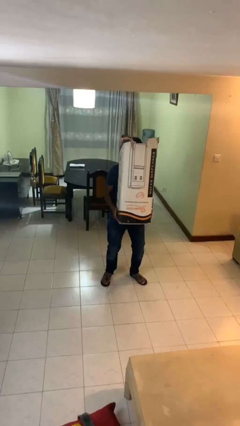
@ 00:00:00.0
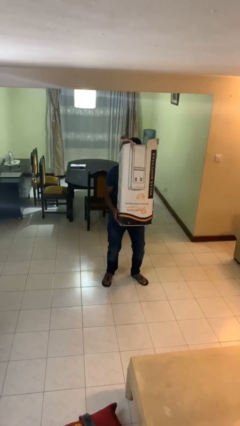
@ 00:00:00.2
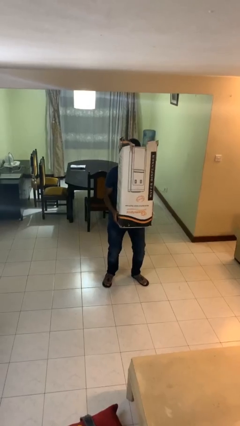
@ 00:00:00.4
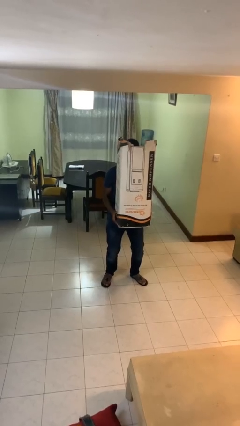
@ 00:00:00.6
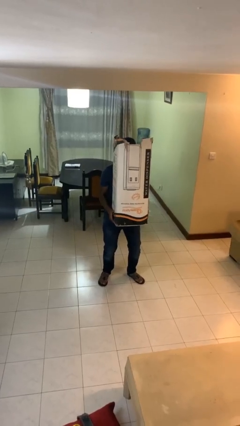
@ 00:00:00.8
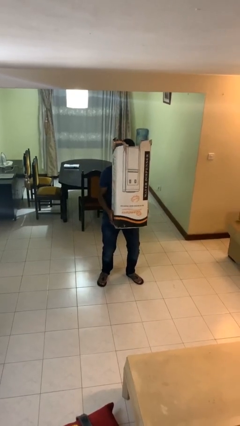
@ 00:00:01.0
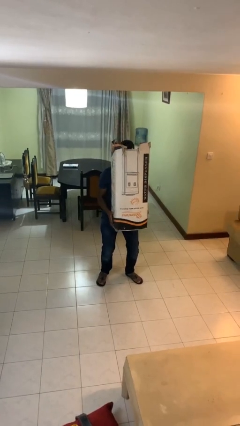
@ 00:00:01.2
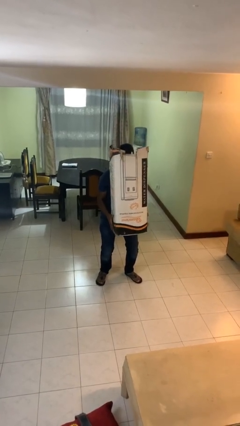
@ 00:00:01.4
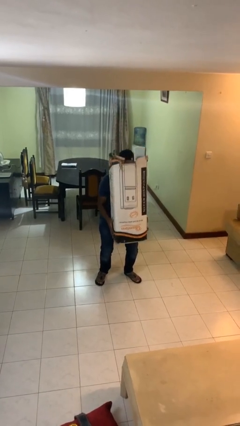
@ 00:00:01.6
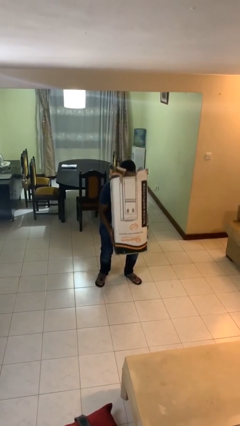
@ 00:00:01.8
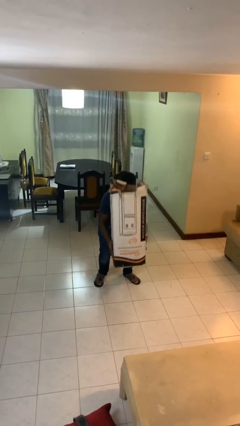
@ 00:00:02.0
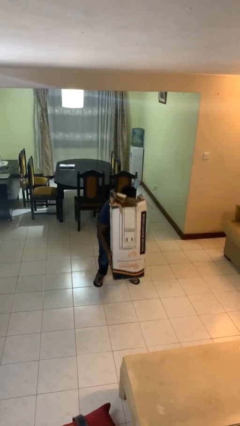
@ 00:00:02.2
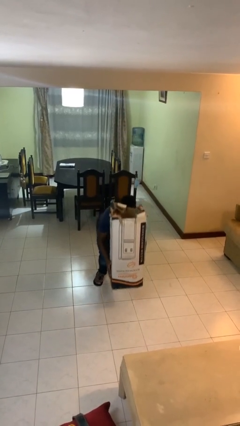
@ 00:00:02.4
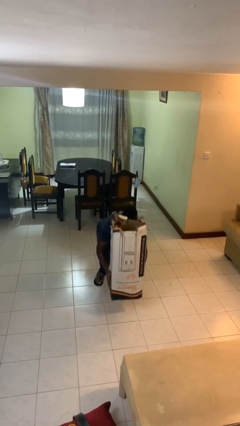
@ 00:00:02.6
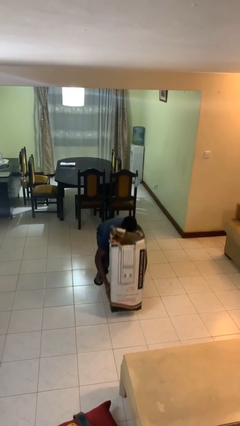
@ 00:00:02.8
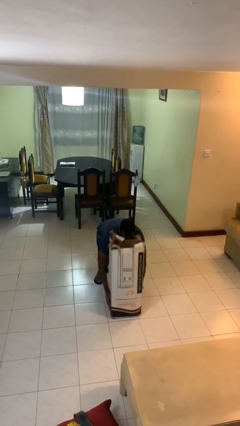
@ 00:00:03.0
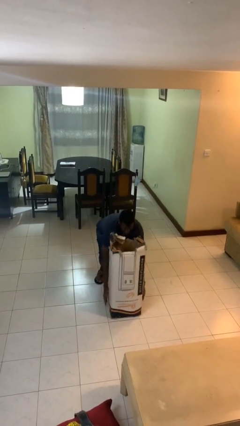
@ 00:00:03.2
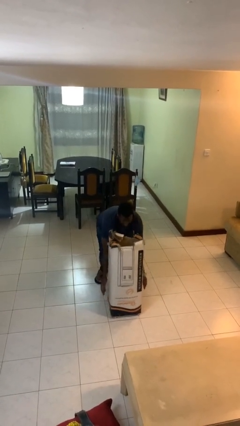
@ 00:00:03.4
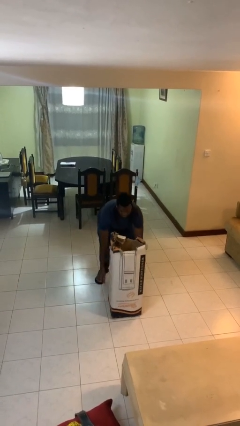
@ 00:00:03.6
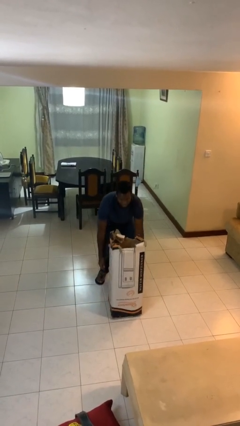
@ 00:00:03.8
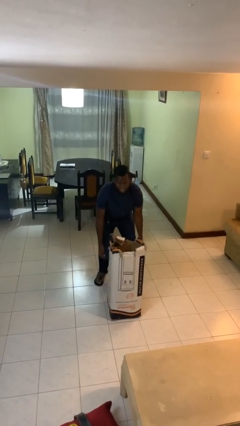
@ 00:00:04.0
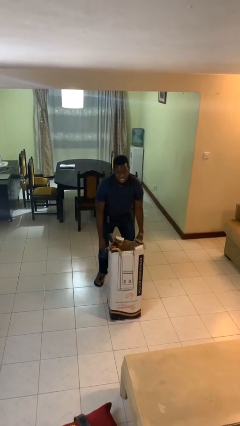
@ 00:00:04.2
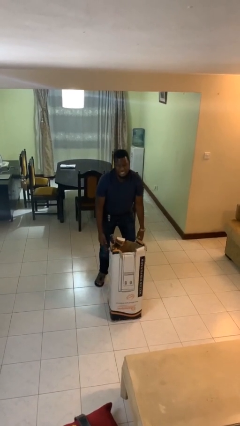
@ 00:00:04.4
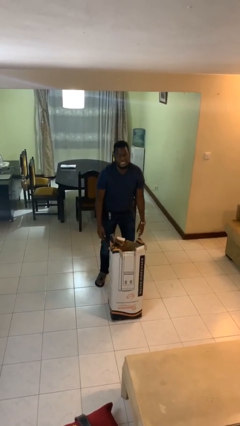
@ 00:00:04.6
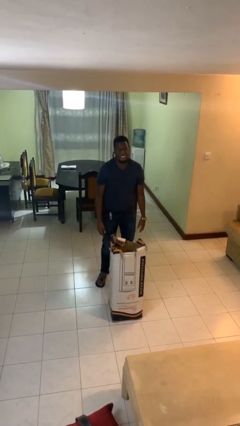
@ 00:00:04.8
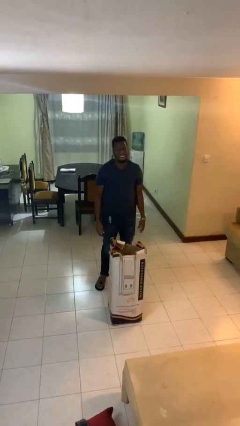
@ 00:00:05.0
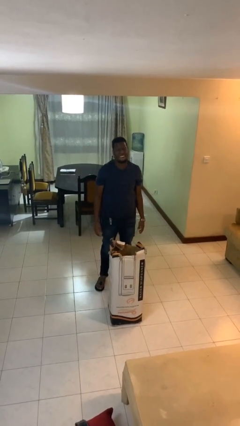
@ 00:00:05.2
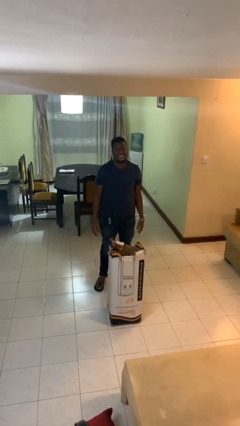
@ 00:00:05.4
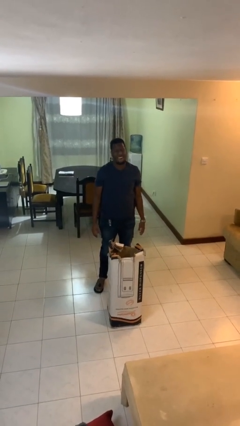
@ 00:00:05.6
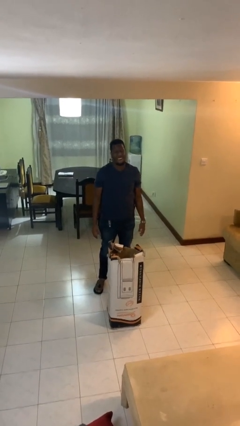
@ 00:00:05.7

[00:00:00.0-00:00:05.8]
person puts down object on floor

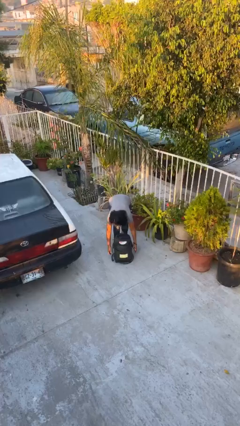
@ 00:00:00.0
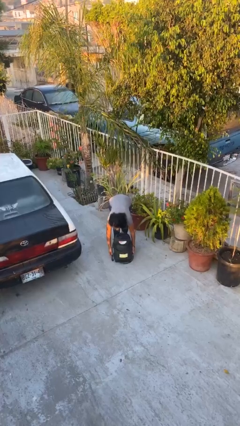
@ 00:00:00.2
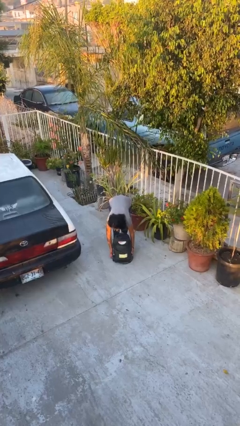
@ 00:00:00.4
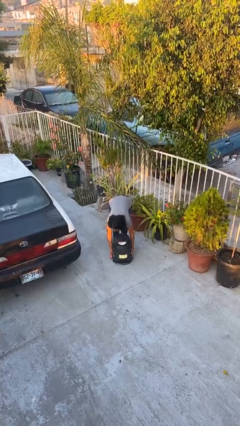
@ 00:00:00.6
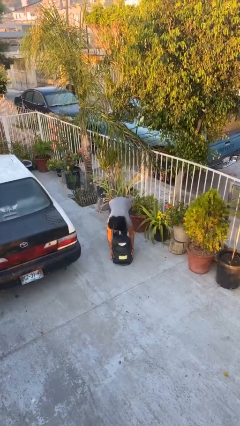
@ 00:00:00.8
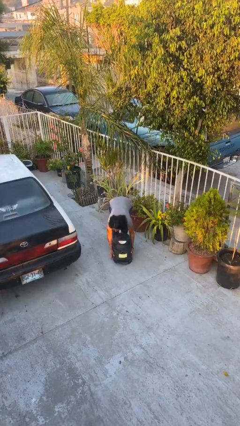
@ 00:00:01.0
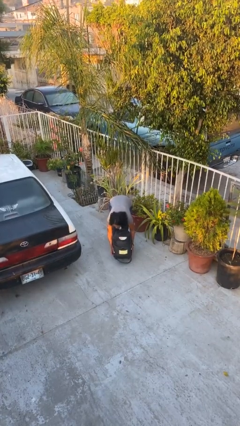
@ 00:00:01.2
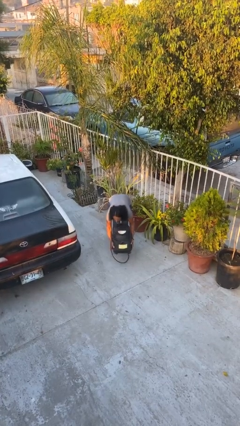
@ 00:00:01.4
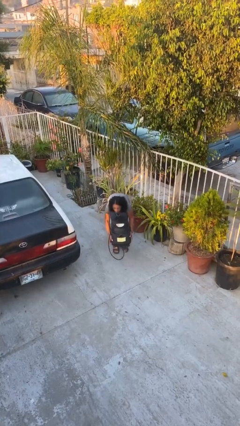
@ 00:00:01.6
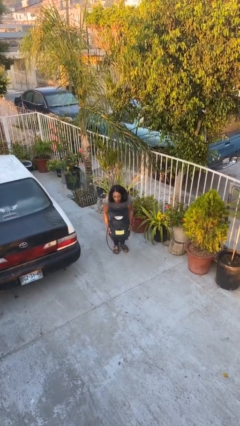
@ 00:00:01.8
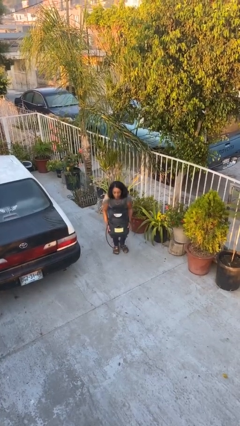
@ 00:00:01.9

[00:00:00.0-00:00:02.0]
person picks up object from floor

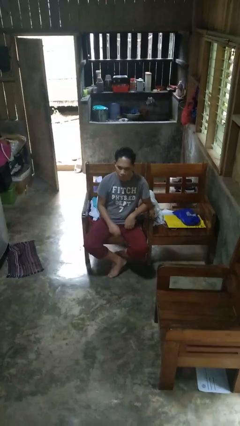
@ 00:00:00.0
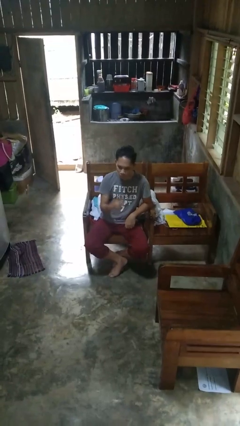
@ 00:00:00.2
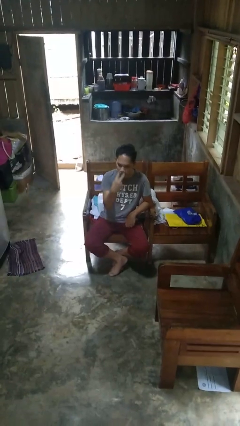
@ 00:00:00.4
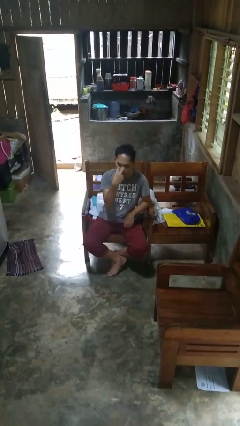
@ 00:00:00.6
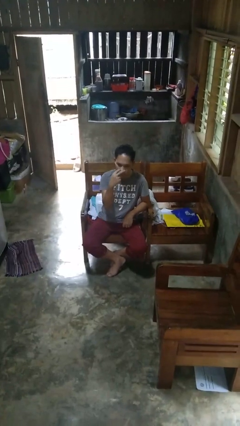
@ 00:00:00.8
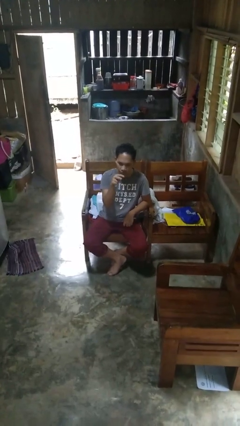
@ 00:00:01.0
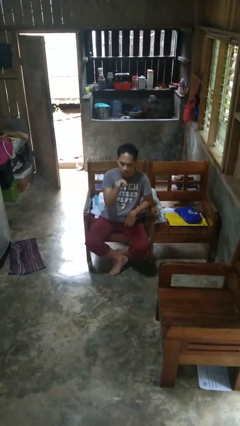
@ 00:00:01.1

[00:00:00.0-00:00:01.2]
person gestures watch closely

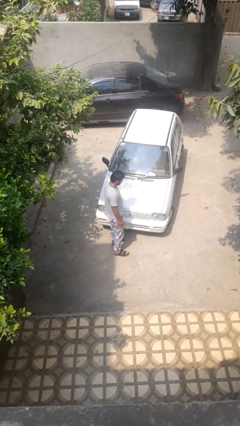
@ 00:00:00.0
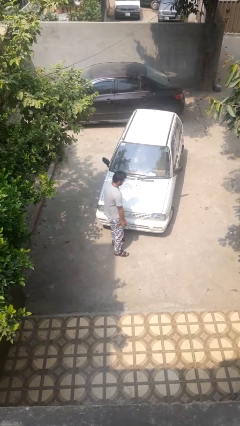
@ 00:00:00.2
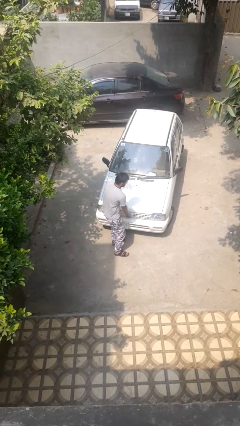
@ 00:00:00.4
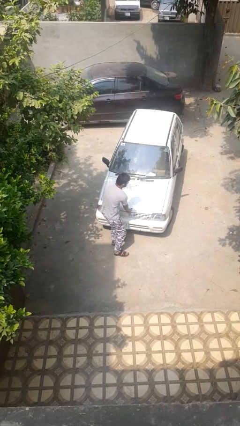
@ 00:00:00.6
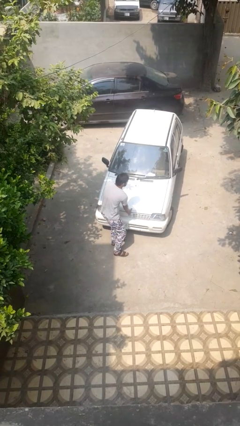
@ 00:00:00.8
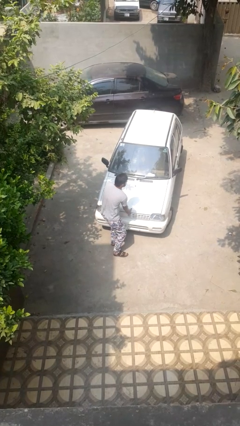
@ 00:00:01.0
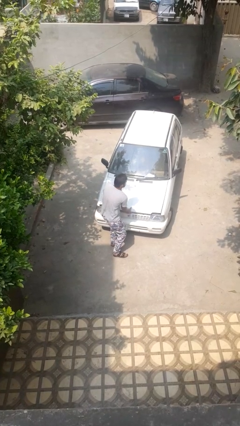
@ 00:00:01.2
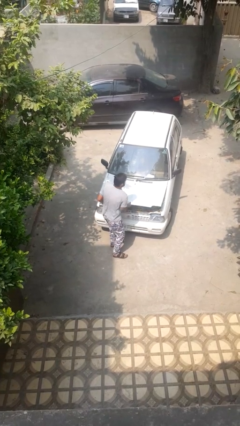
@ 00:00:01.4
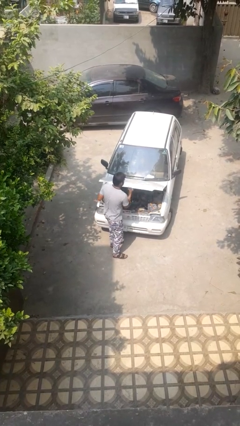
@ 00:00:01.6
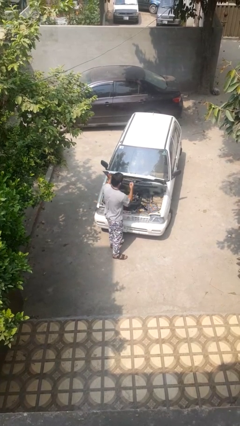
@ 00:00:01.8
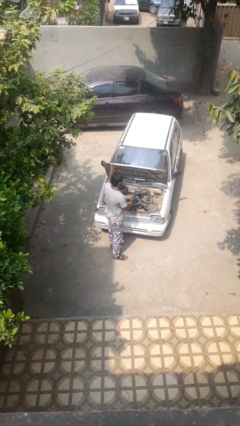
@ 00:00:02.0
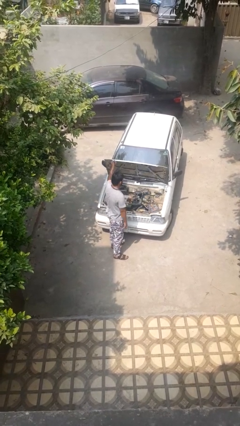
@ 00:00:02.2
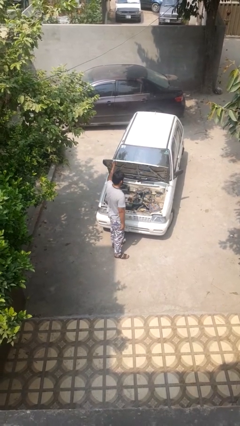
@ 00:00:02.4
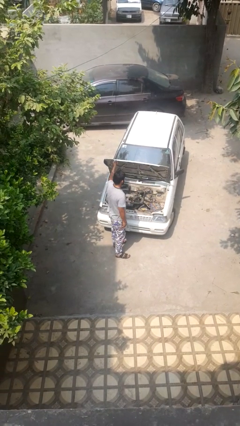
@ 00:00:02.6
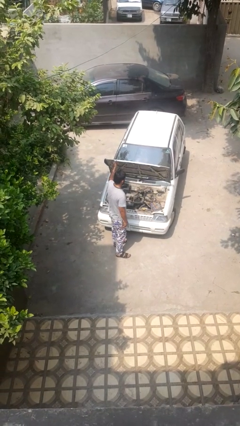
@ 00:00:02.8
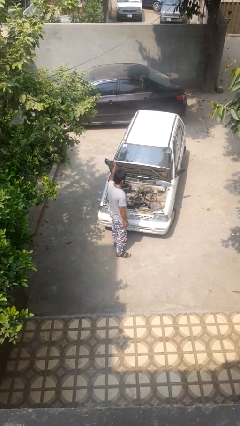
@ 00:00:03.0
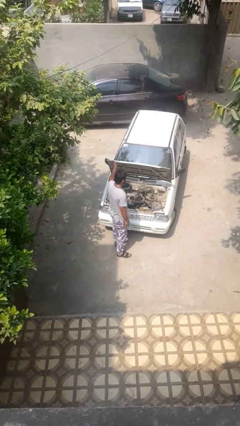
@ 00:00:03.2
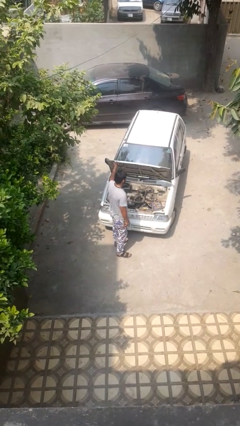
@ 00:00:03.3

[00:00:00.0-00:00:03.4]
person opens car hood

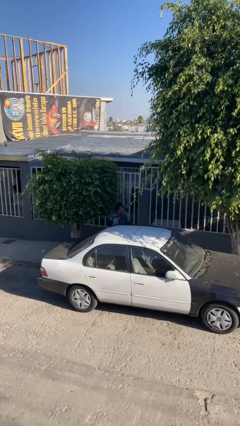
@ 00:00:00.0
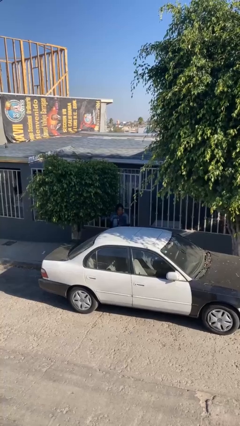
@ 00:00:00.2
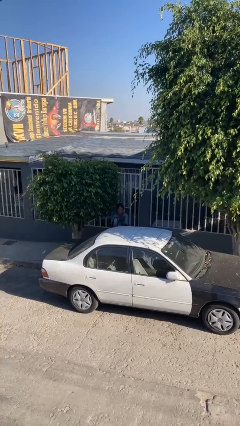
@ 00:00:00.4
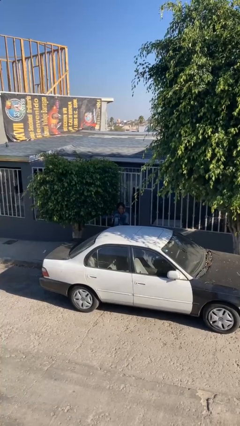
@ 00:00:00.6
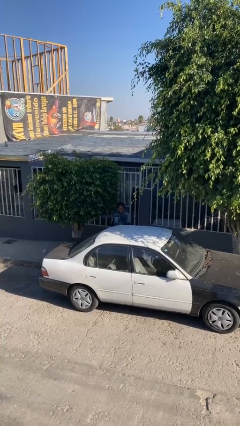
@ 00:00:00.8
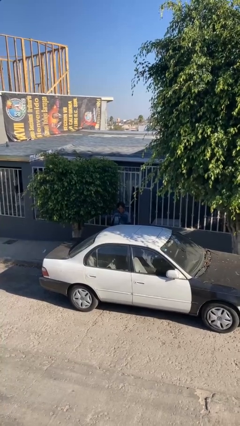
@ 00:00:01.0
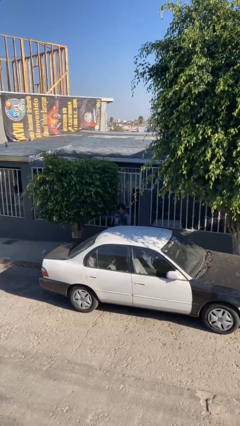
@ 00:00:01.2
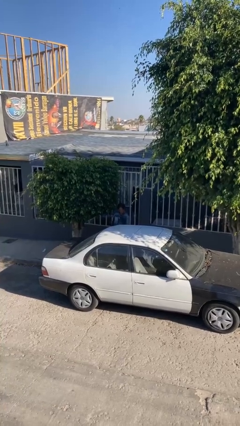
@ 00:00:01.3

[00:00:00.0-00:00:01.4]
person closes car door

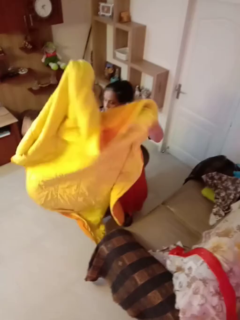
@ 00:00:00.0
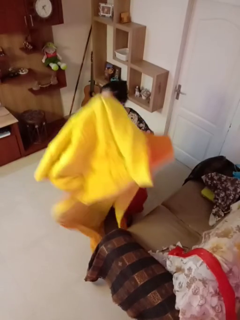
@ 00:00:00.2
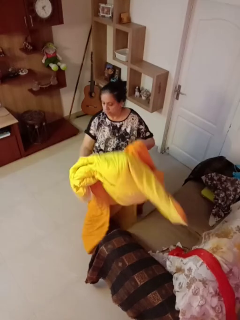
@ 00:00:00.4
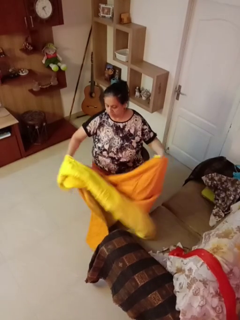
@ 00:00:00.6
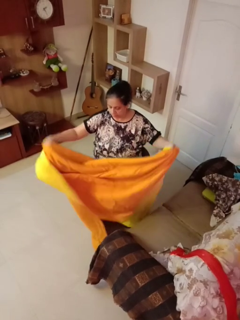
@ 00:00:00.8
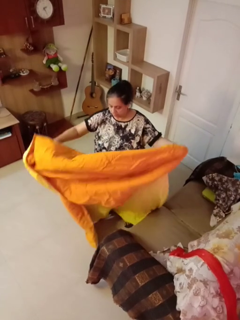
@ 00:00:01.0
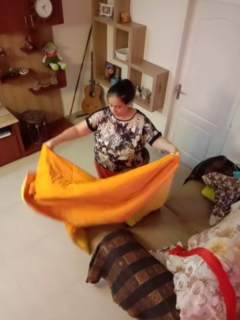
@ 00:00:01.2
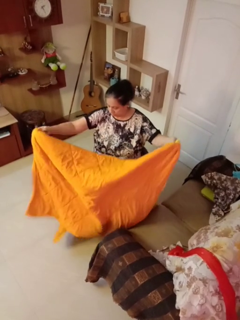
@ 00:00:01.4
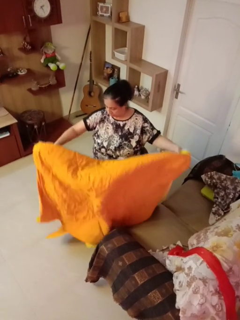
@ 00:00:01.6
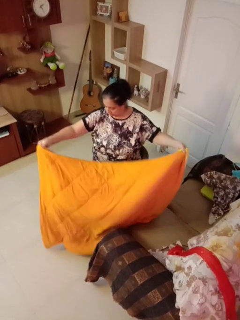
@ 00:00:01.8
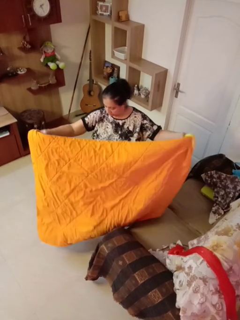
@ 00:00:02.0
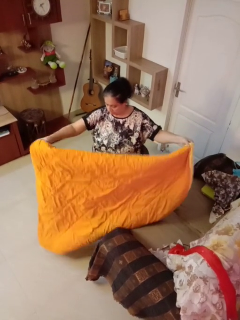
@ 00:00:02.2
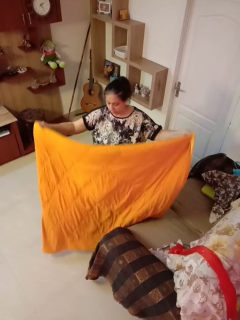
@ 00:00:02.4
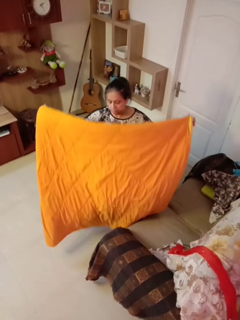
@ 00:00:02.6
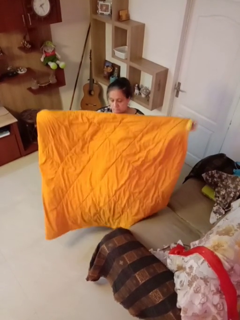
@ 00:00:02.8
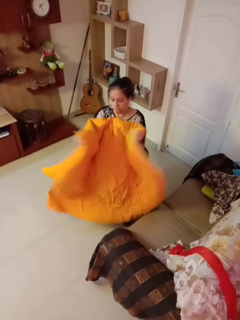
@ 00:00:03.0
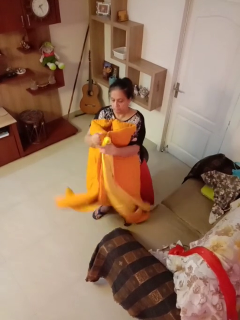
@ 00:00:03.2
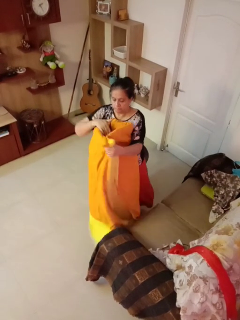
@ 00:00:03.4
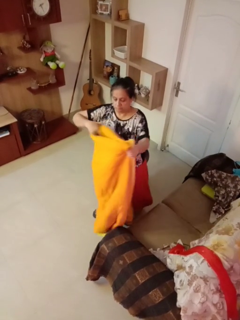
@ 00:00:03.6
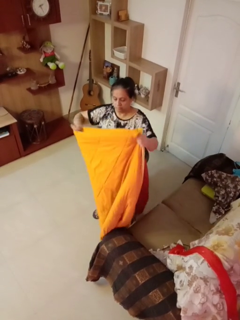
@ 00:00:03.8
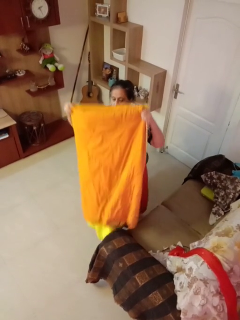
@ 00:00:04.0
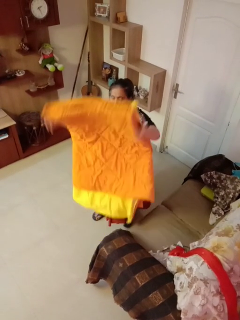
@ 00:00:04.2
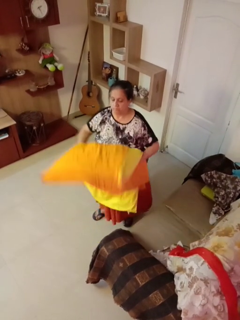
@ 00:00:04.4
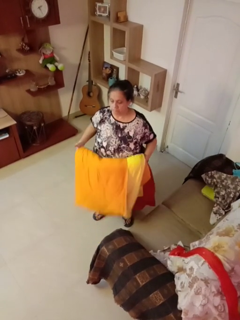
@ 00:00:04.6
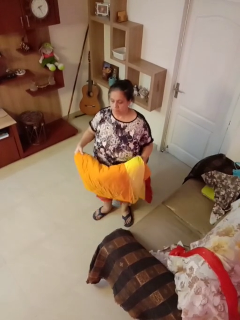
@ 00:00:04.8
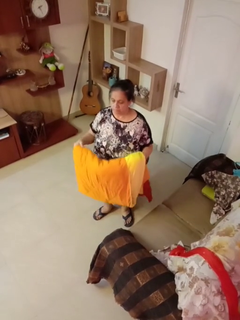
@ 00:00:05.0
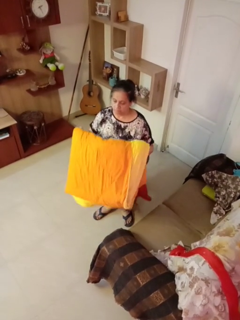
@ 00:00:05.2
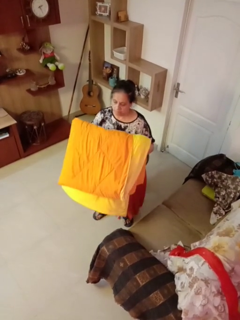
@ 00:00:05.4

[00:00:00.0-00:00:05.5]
person folds blanket
